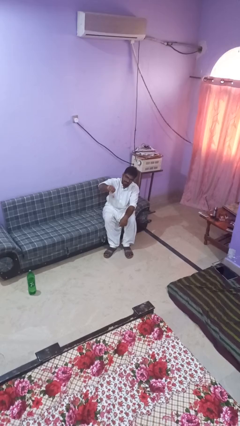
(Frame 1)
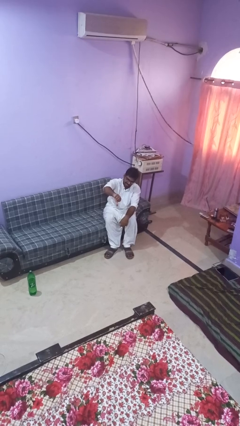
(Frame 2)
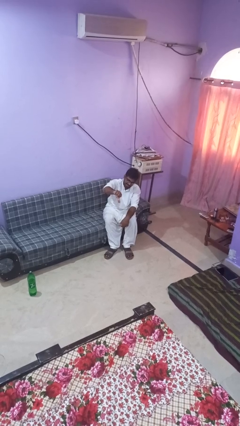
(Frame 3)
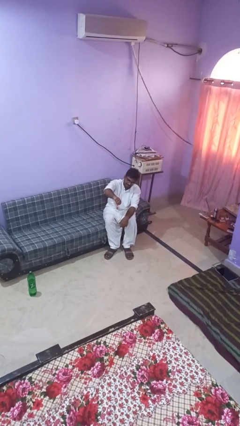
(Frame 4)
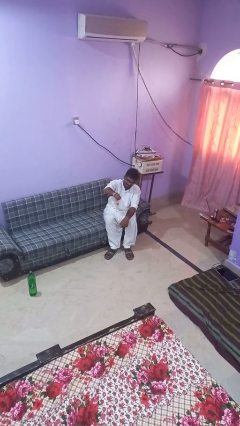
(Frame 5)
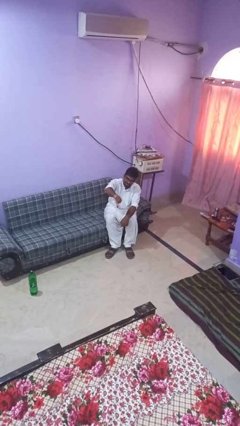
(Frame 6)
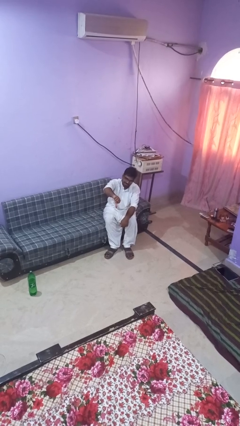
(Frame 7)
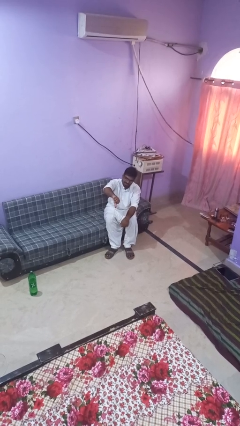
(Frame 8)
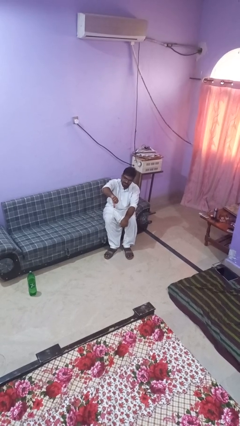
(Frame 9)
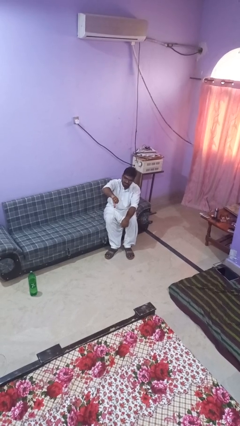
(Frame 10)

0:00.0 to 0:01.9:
person gestures thumbs down

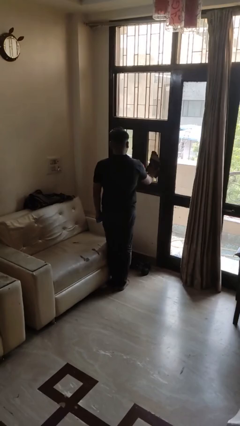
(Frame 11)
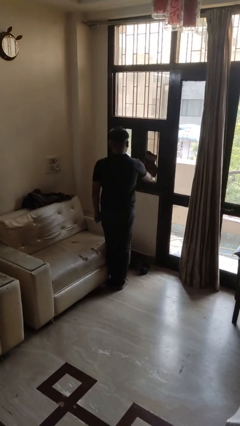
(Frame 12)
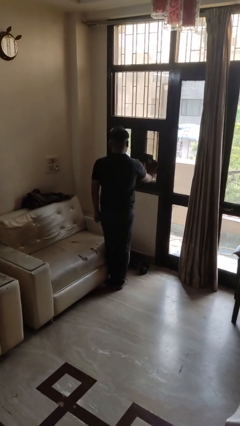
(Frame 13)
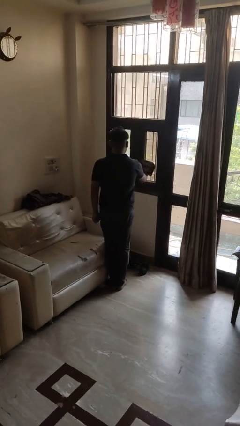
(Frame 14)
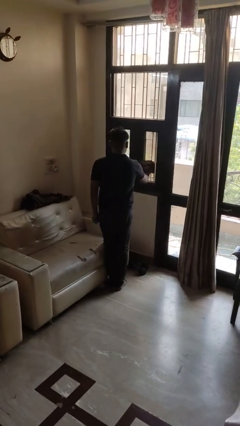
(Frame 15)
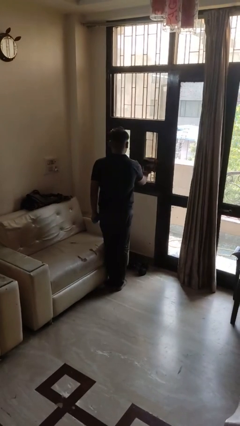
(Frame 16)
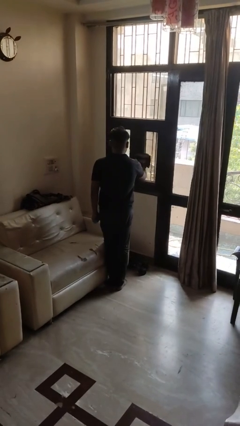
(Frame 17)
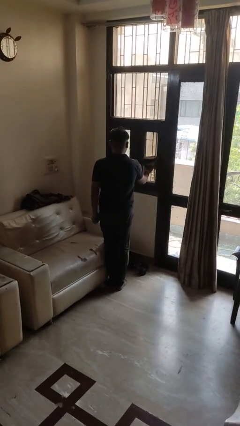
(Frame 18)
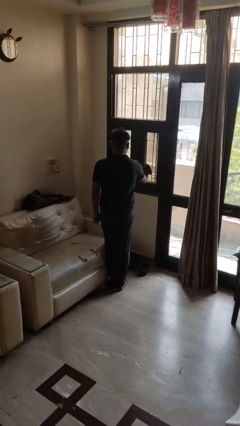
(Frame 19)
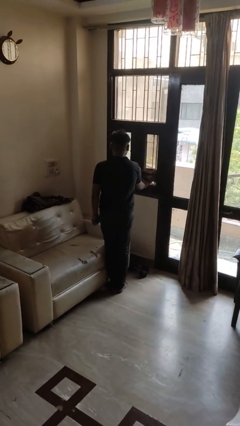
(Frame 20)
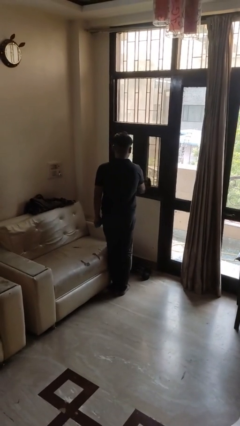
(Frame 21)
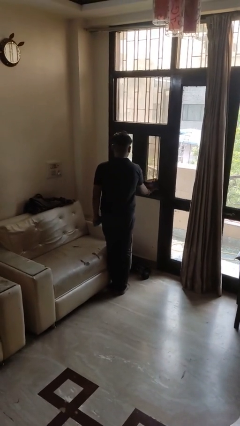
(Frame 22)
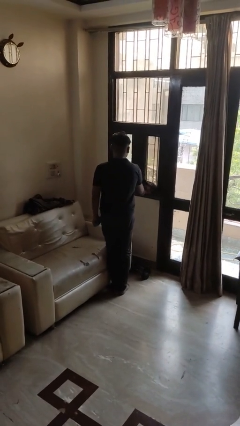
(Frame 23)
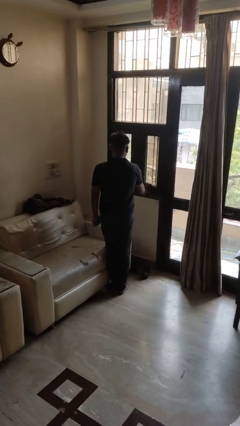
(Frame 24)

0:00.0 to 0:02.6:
person washes window

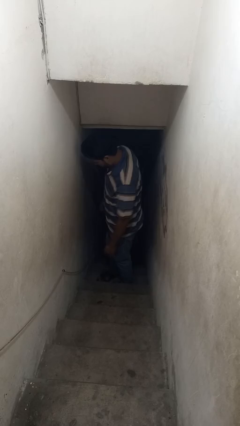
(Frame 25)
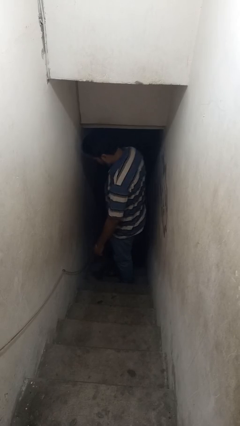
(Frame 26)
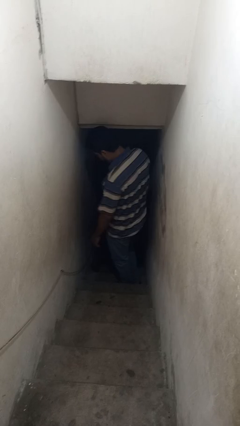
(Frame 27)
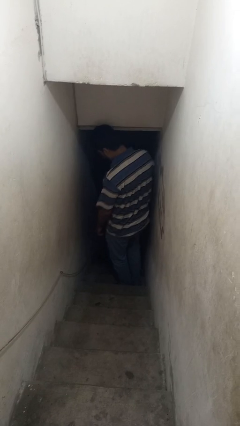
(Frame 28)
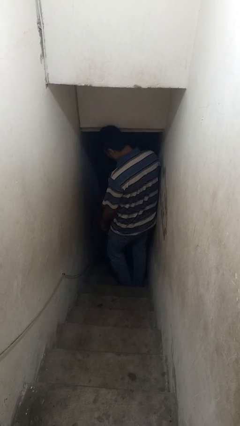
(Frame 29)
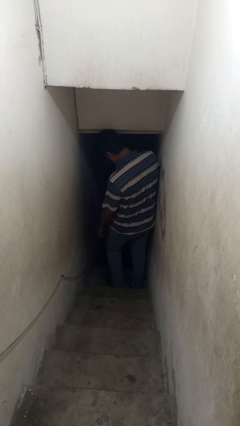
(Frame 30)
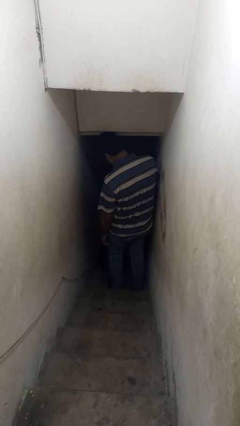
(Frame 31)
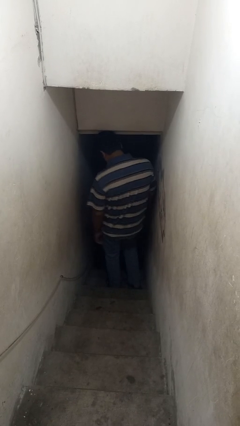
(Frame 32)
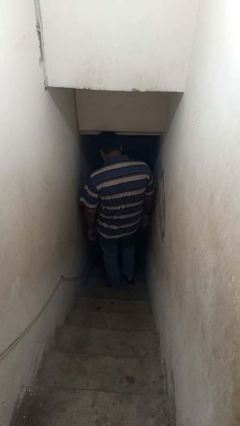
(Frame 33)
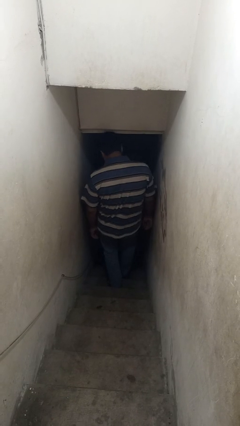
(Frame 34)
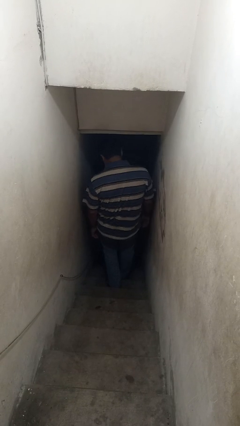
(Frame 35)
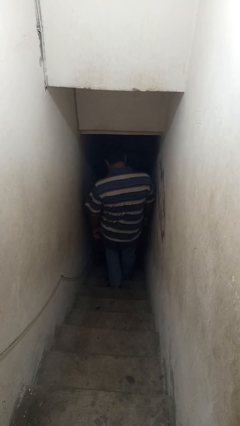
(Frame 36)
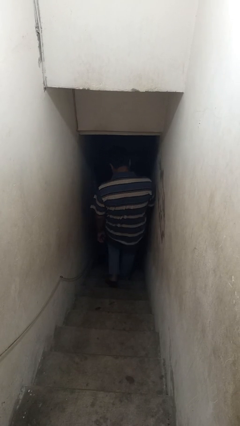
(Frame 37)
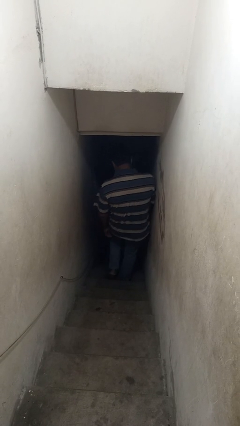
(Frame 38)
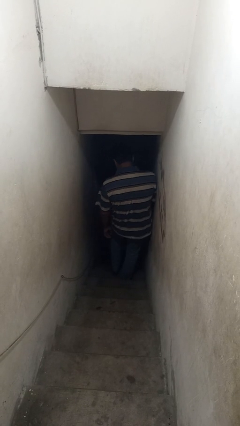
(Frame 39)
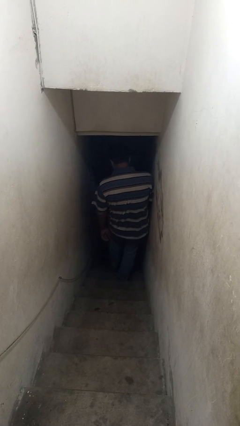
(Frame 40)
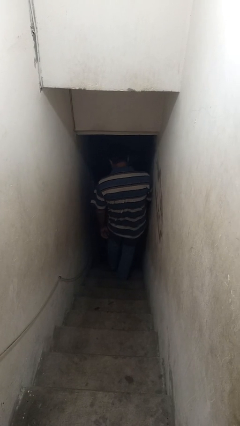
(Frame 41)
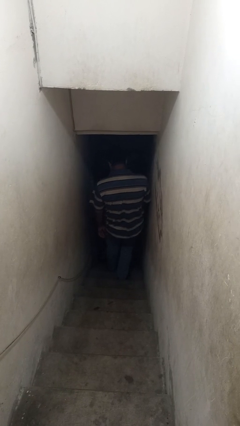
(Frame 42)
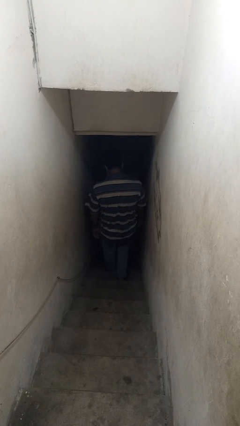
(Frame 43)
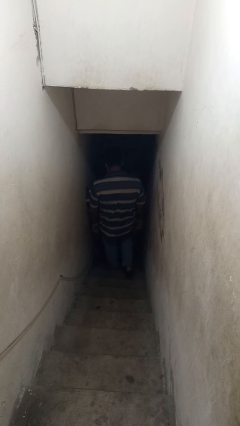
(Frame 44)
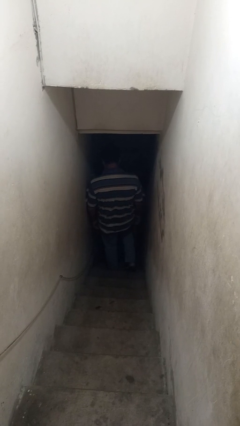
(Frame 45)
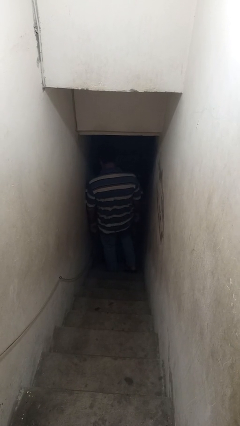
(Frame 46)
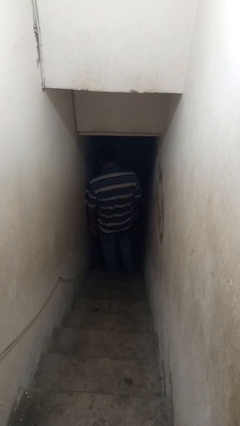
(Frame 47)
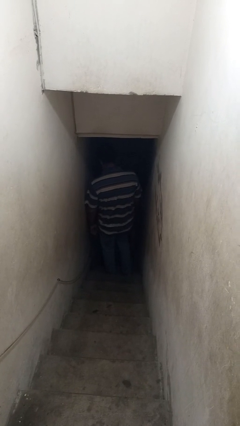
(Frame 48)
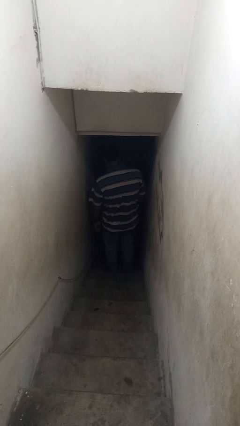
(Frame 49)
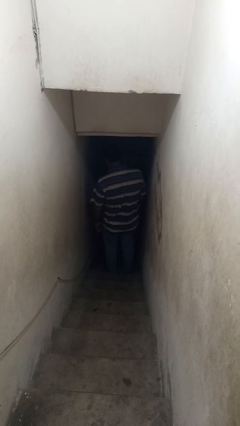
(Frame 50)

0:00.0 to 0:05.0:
person climbs down stairs

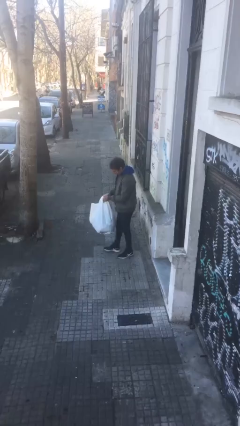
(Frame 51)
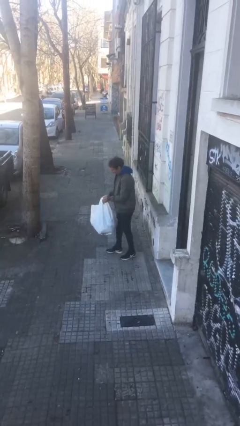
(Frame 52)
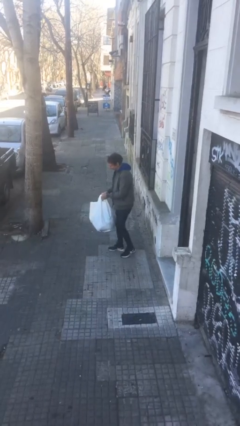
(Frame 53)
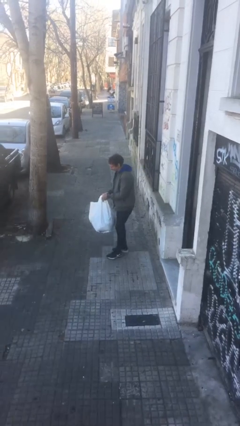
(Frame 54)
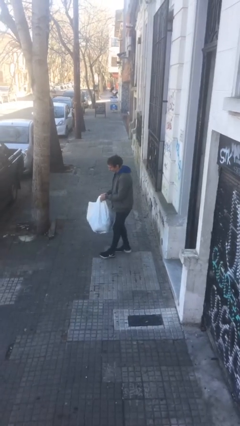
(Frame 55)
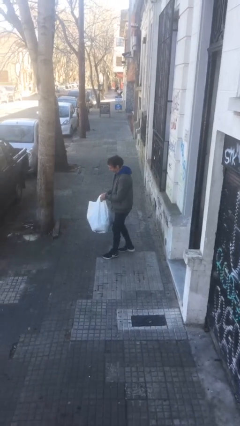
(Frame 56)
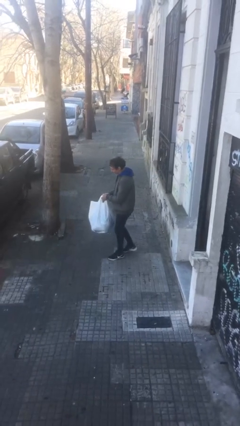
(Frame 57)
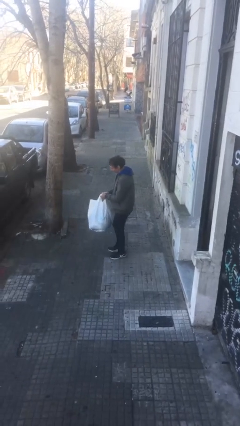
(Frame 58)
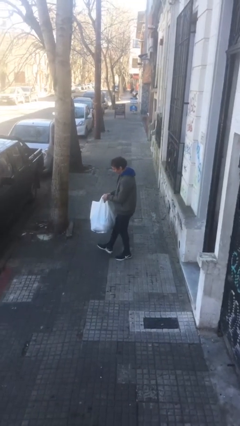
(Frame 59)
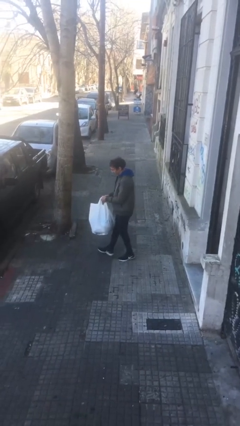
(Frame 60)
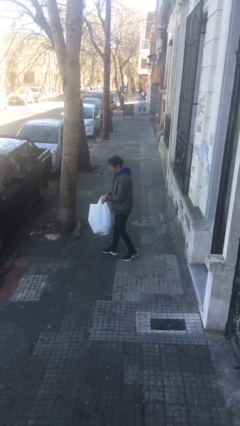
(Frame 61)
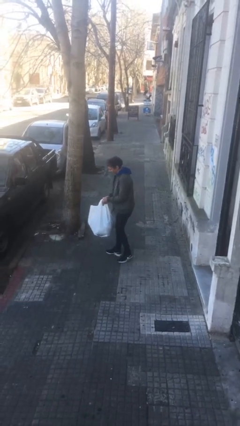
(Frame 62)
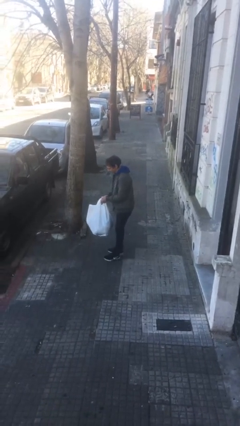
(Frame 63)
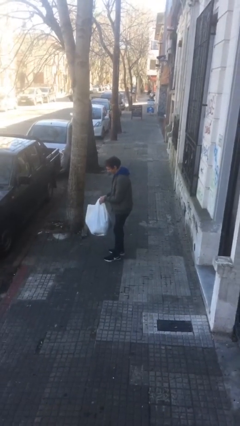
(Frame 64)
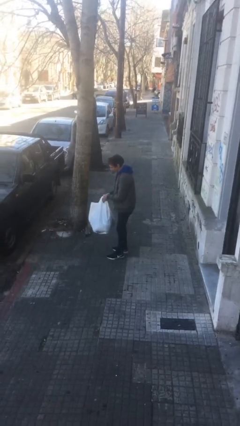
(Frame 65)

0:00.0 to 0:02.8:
person carries heavy object

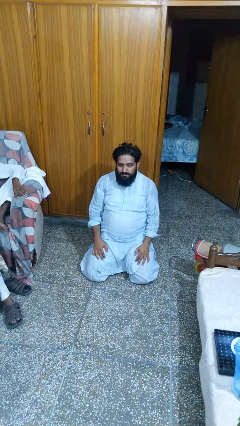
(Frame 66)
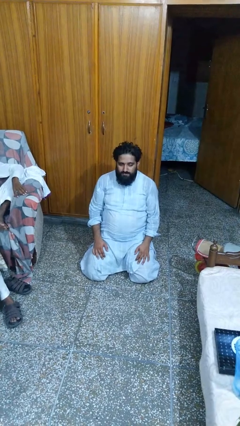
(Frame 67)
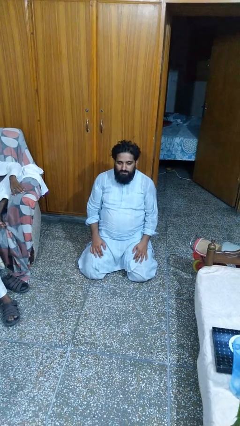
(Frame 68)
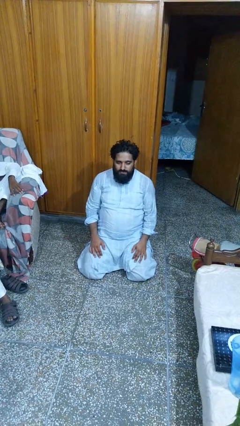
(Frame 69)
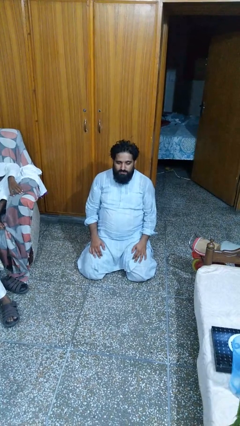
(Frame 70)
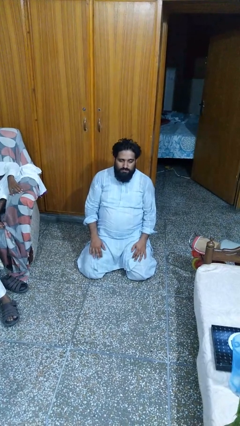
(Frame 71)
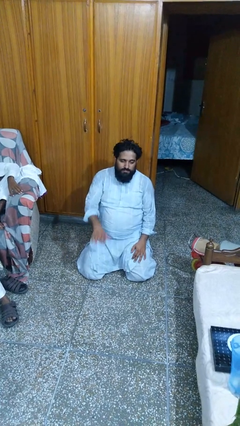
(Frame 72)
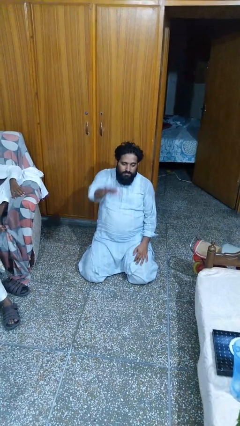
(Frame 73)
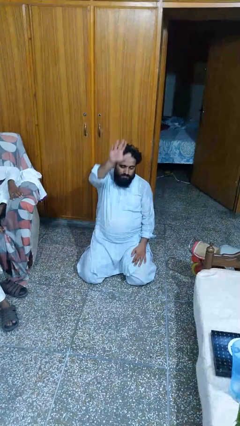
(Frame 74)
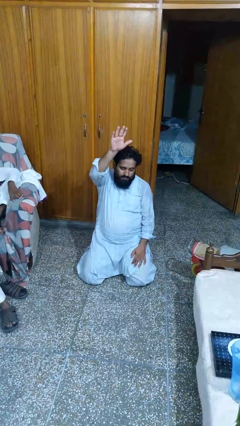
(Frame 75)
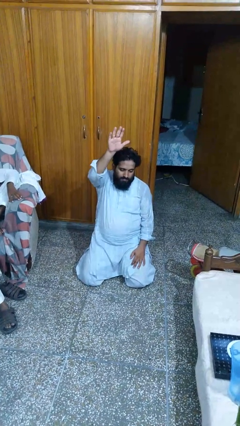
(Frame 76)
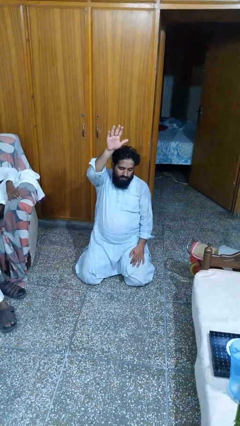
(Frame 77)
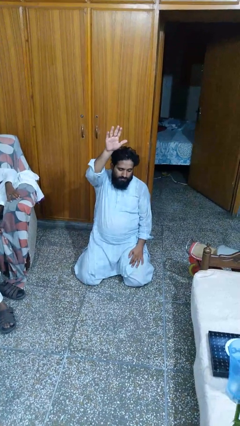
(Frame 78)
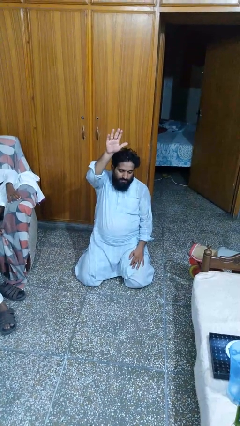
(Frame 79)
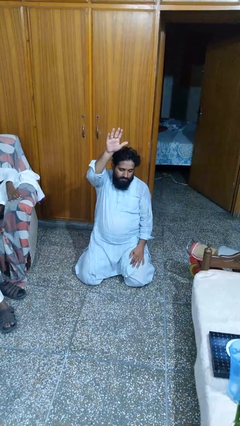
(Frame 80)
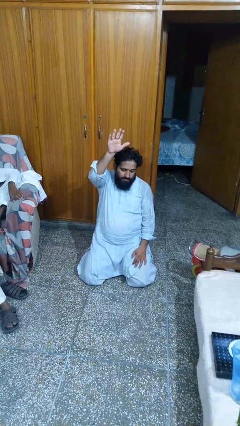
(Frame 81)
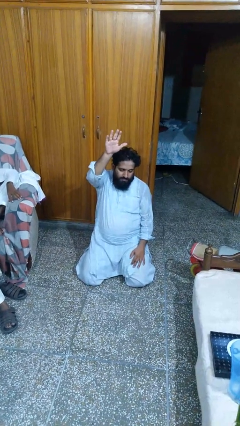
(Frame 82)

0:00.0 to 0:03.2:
person gestures raise hand

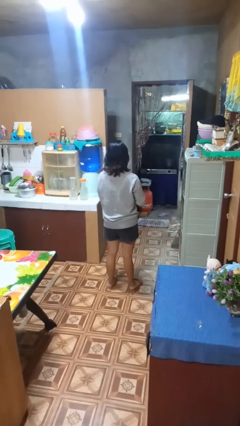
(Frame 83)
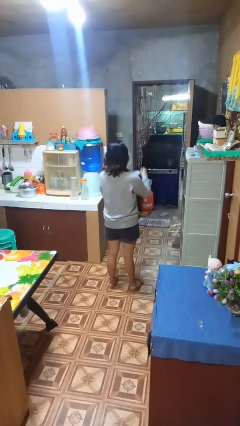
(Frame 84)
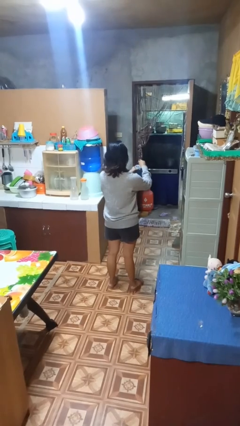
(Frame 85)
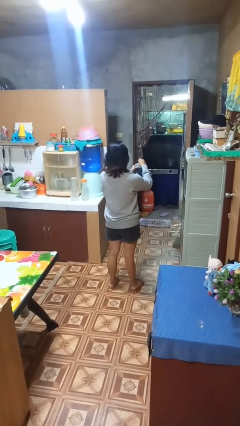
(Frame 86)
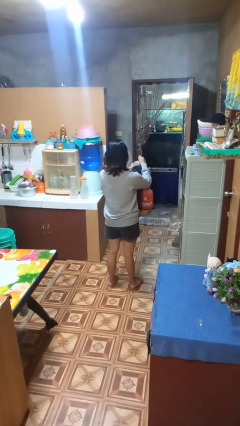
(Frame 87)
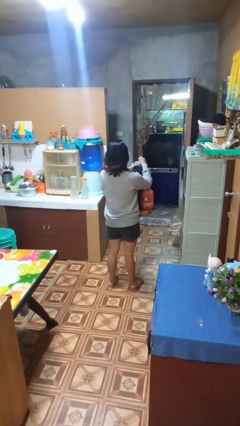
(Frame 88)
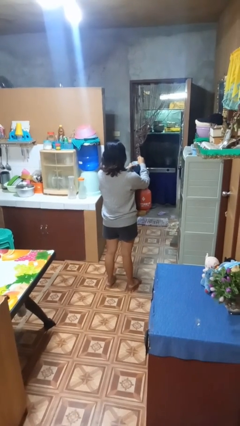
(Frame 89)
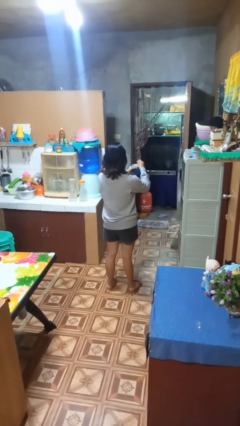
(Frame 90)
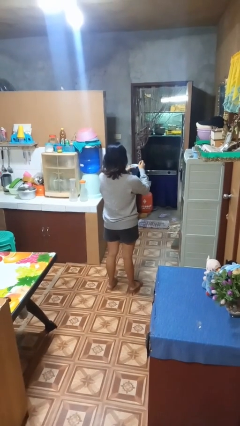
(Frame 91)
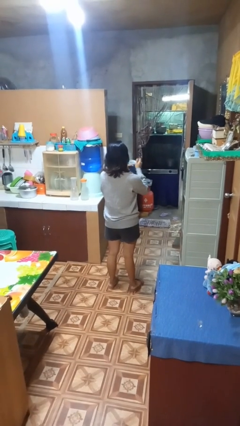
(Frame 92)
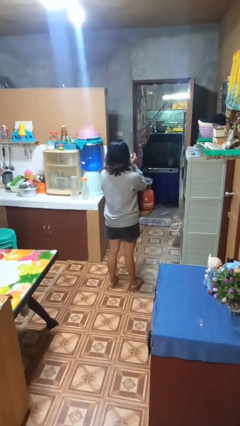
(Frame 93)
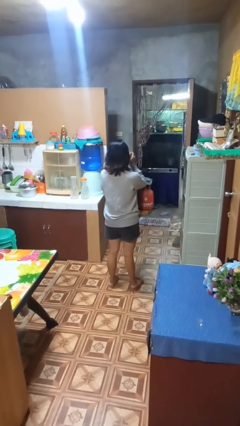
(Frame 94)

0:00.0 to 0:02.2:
person stirs mug
